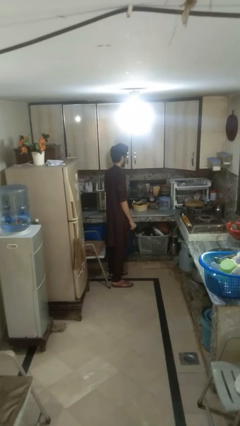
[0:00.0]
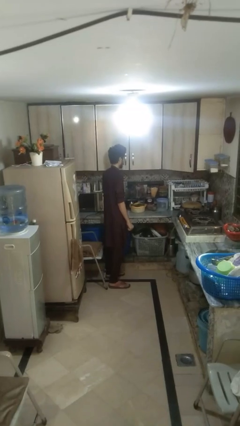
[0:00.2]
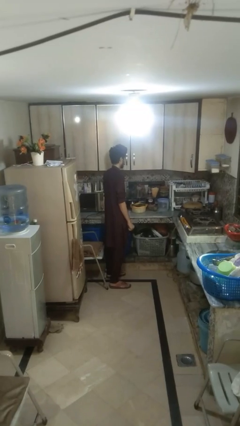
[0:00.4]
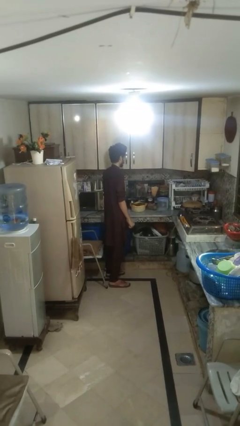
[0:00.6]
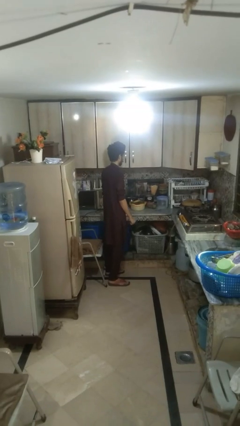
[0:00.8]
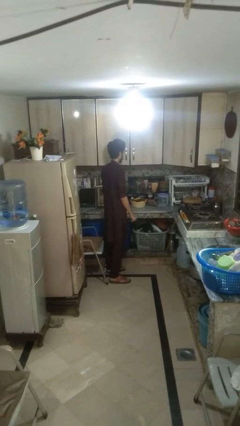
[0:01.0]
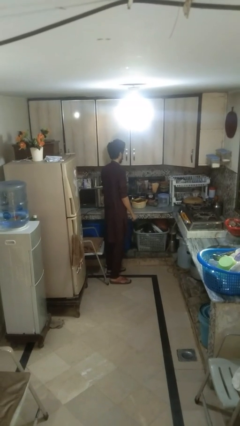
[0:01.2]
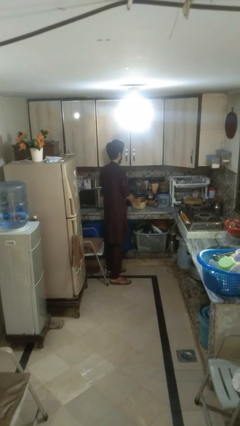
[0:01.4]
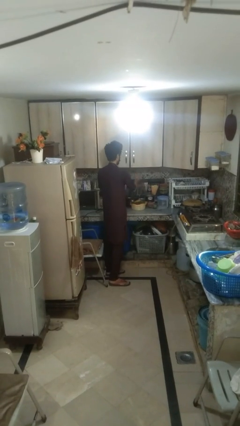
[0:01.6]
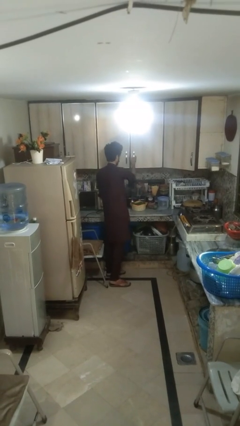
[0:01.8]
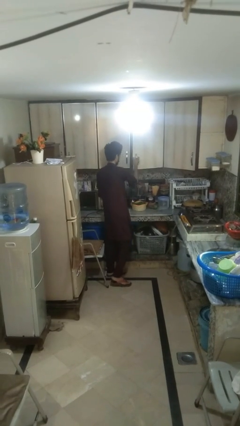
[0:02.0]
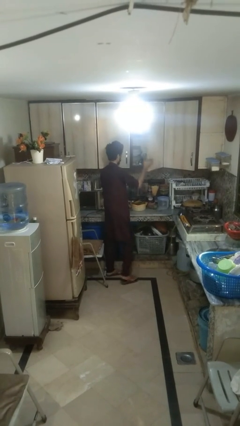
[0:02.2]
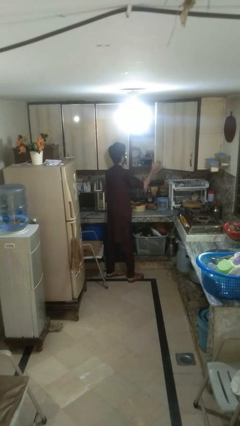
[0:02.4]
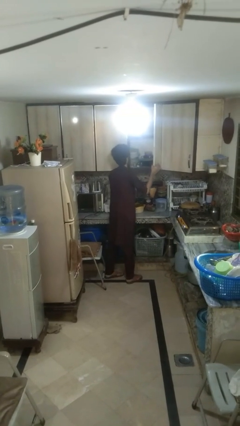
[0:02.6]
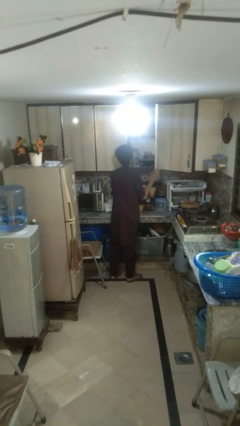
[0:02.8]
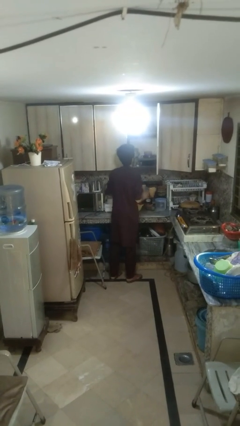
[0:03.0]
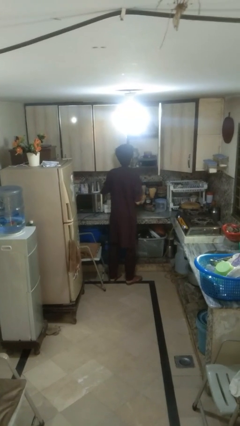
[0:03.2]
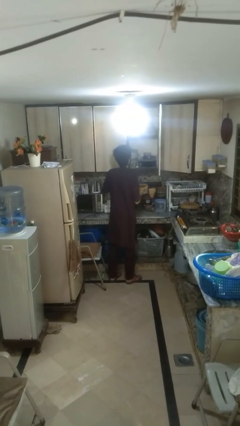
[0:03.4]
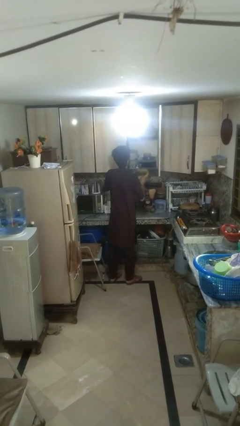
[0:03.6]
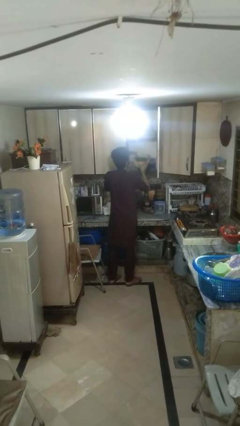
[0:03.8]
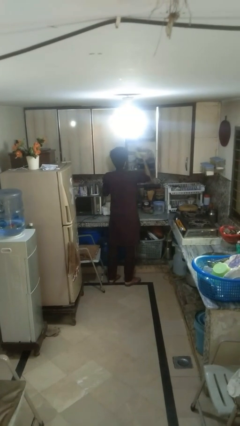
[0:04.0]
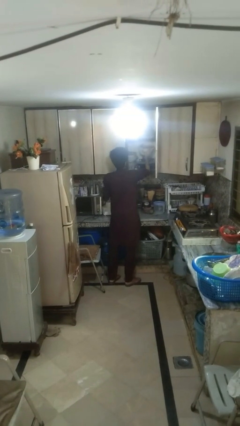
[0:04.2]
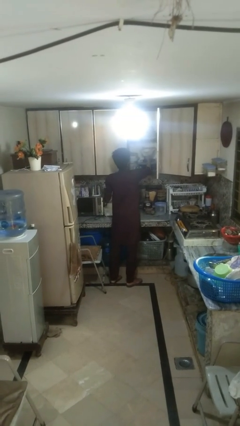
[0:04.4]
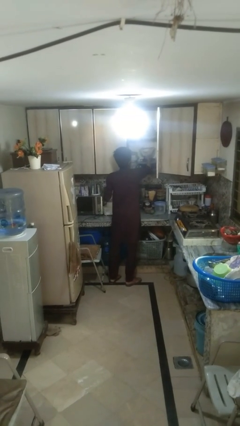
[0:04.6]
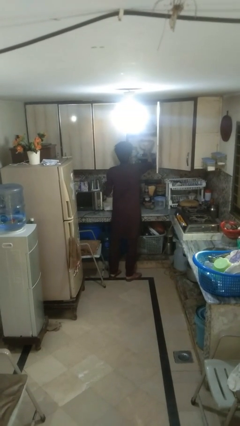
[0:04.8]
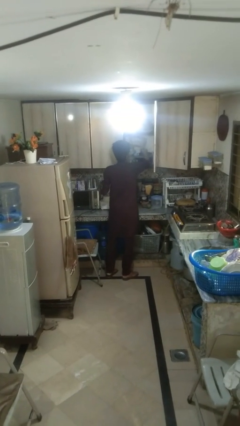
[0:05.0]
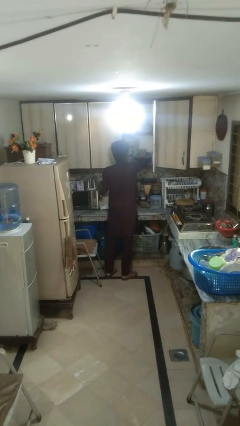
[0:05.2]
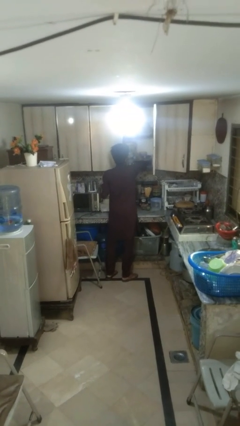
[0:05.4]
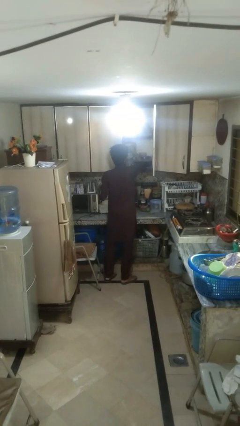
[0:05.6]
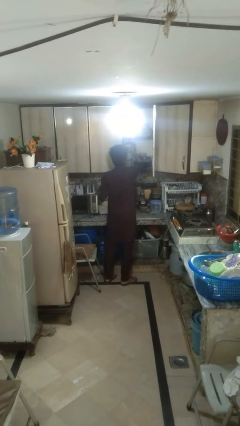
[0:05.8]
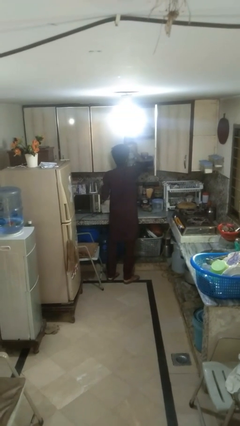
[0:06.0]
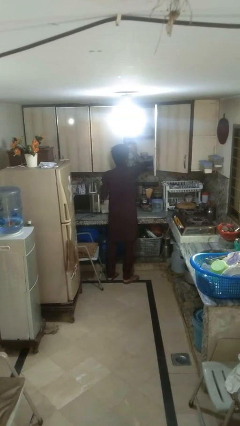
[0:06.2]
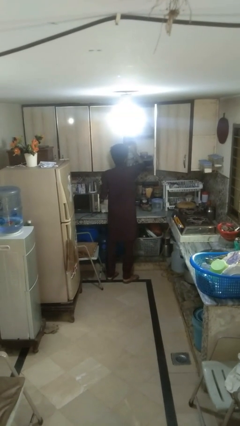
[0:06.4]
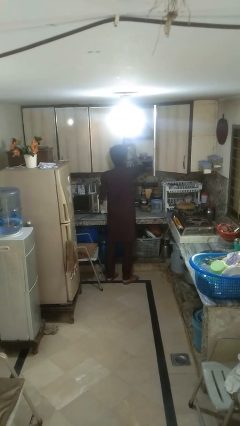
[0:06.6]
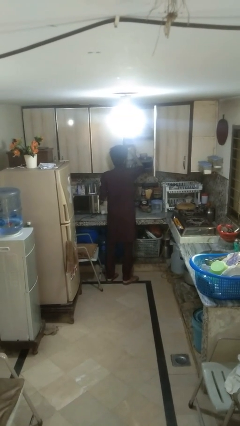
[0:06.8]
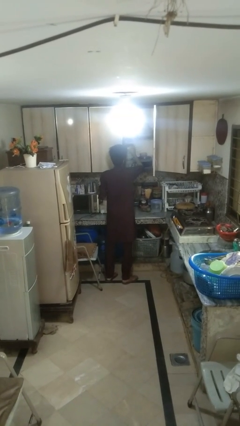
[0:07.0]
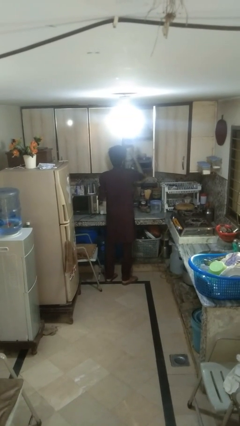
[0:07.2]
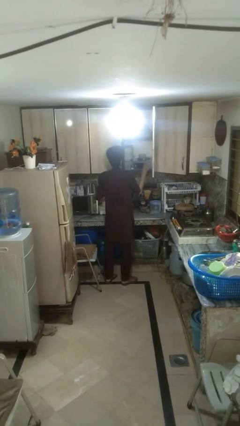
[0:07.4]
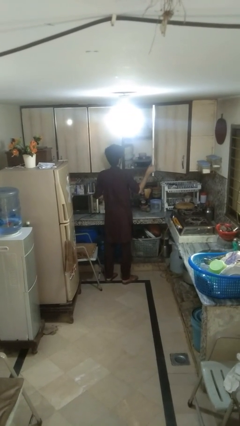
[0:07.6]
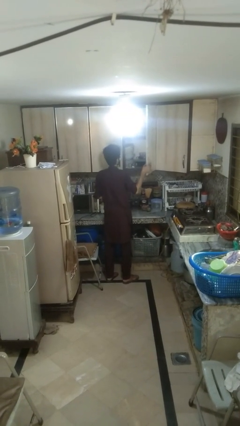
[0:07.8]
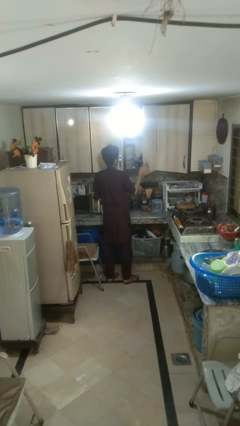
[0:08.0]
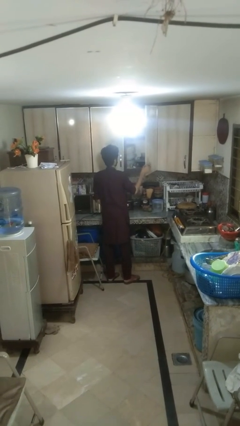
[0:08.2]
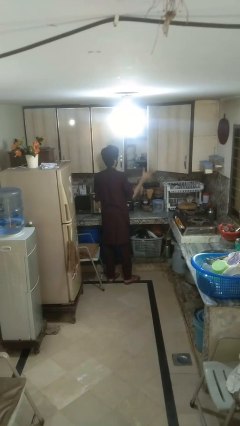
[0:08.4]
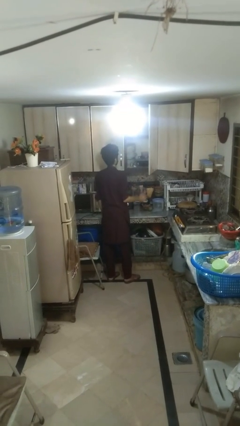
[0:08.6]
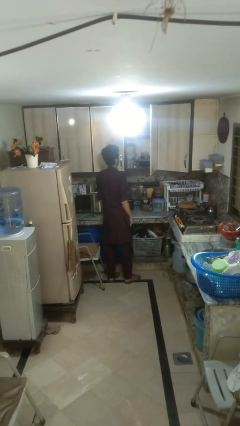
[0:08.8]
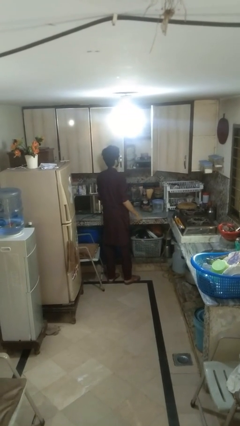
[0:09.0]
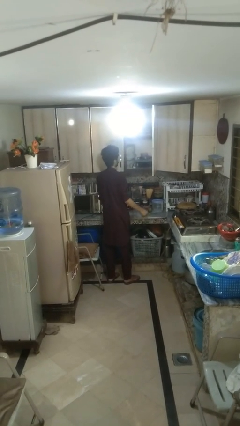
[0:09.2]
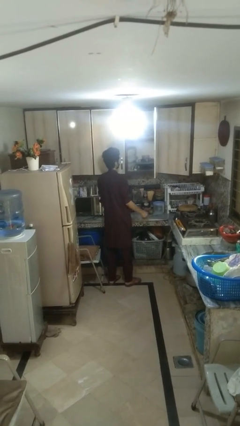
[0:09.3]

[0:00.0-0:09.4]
person puts object in cabinet

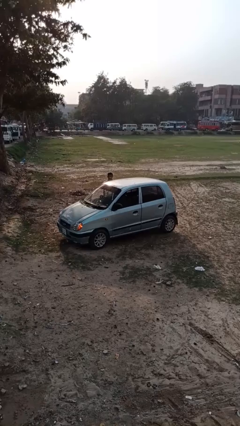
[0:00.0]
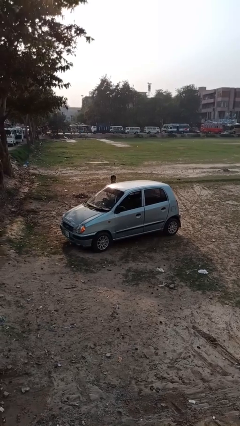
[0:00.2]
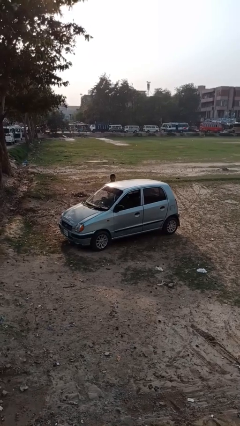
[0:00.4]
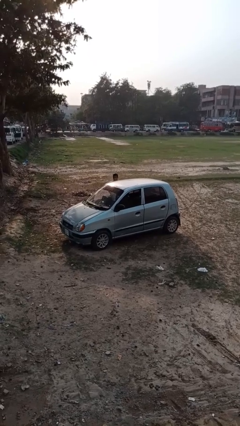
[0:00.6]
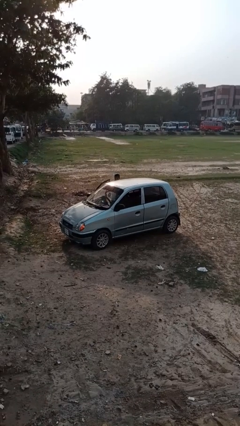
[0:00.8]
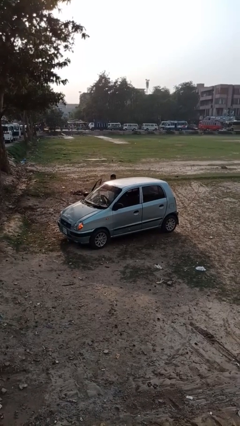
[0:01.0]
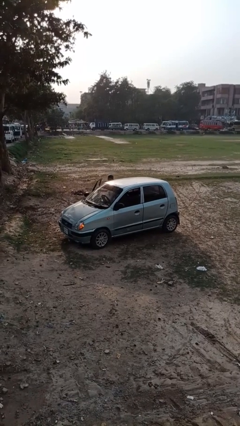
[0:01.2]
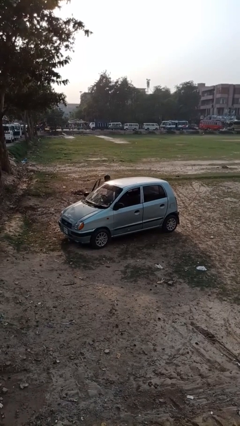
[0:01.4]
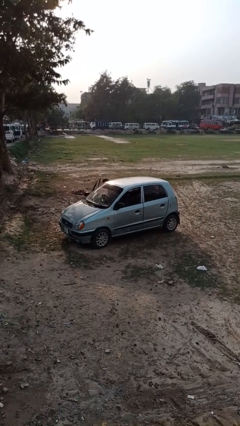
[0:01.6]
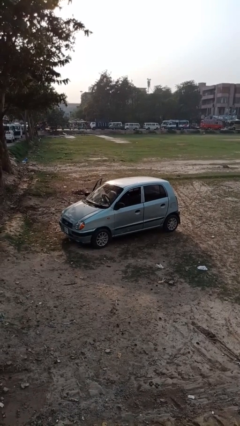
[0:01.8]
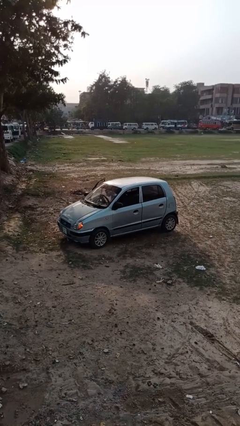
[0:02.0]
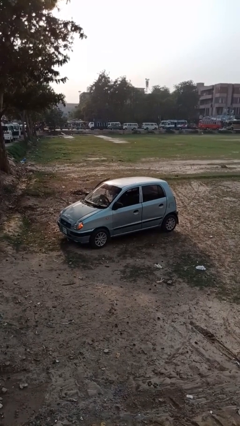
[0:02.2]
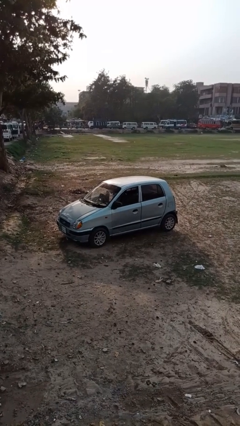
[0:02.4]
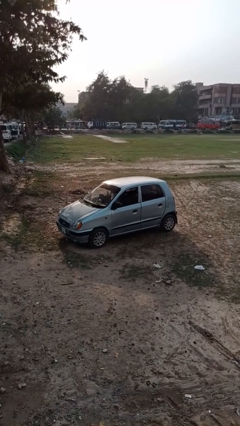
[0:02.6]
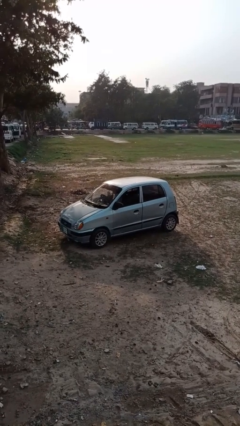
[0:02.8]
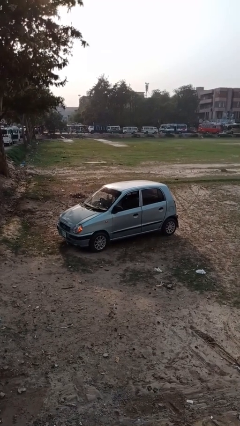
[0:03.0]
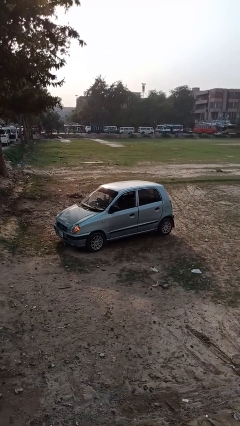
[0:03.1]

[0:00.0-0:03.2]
car picks up person

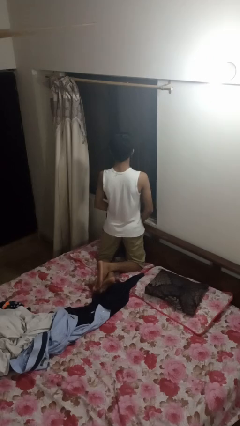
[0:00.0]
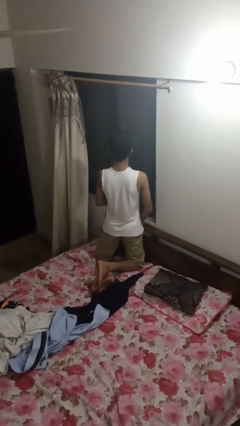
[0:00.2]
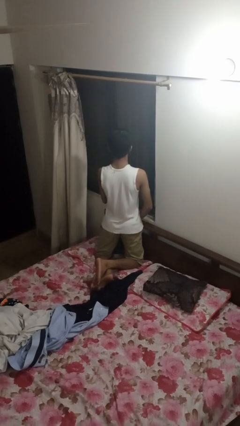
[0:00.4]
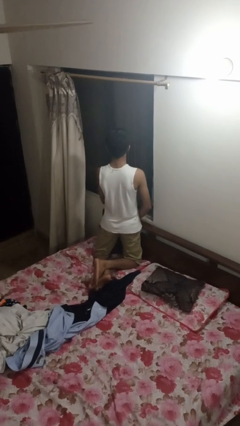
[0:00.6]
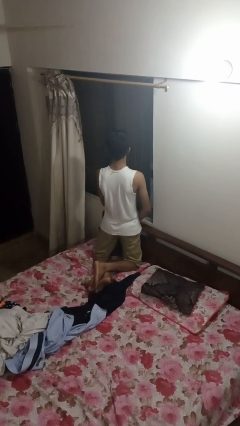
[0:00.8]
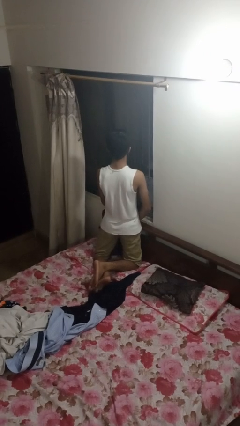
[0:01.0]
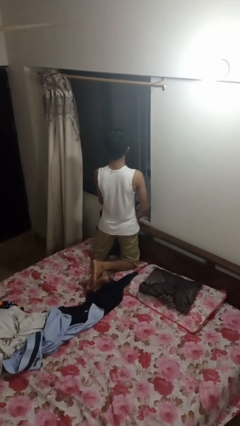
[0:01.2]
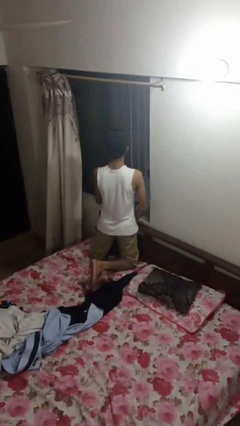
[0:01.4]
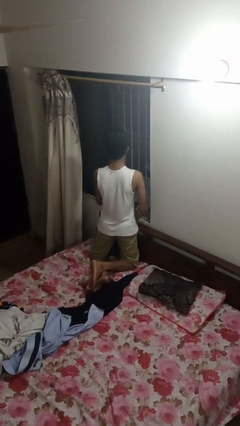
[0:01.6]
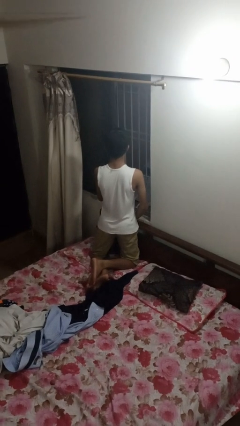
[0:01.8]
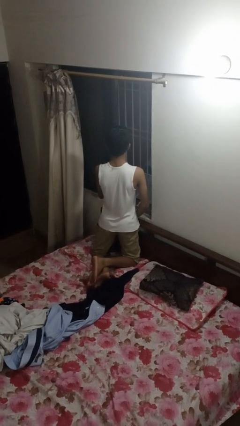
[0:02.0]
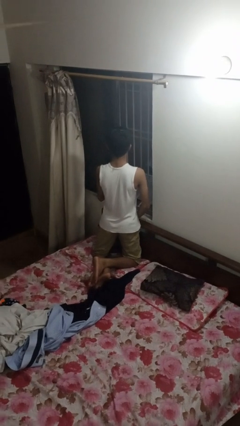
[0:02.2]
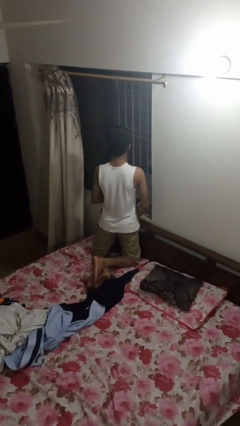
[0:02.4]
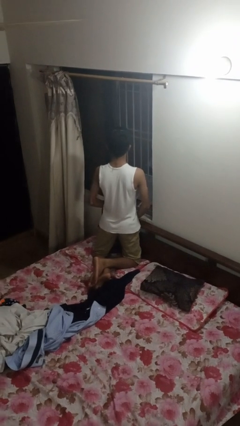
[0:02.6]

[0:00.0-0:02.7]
person opens home window

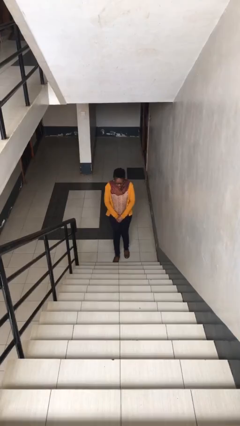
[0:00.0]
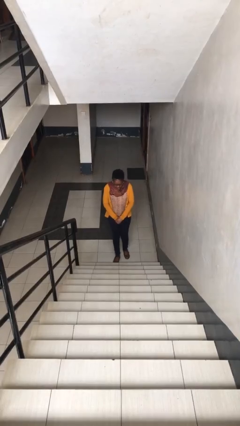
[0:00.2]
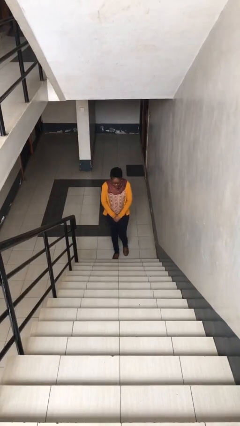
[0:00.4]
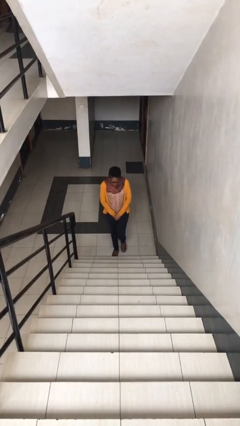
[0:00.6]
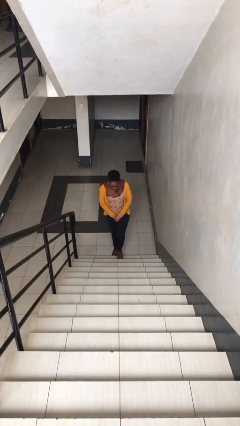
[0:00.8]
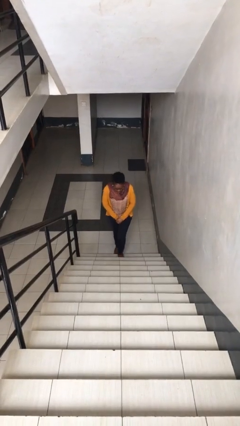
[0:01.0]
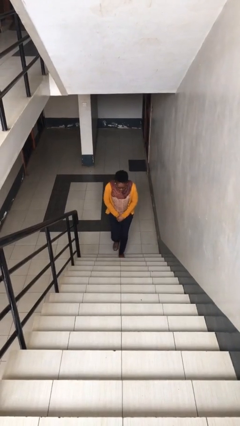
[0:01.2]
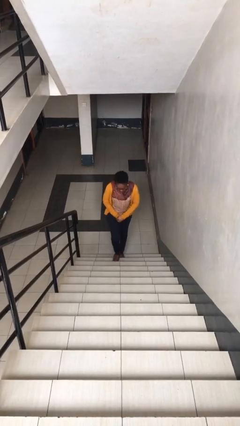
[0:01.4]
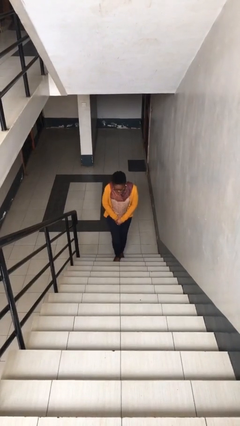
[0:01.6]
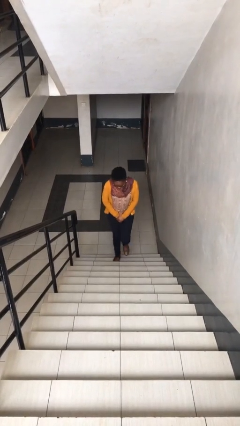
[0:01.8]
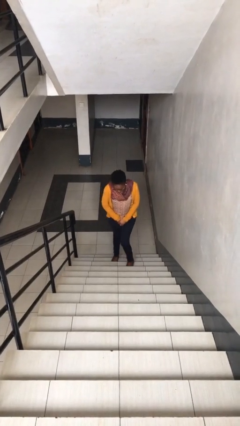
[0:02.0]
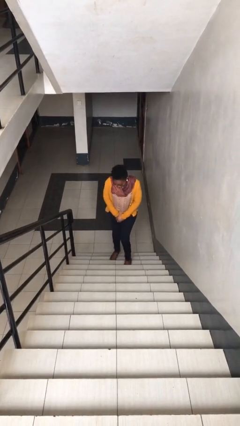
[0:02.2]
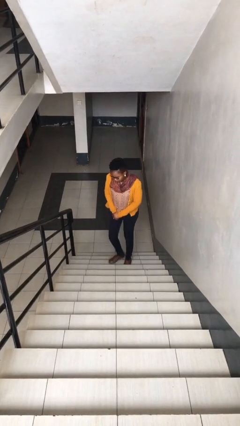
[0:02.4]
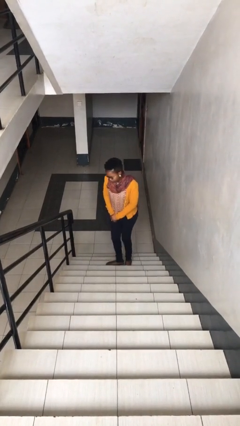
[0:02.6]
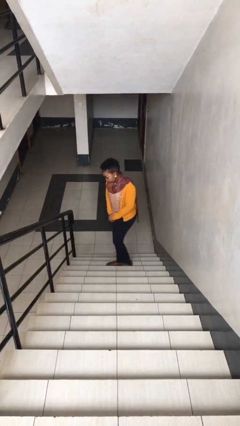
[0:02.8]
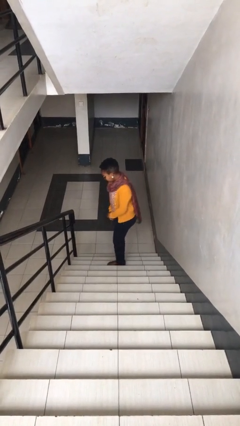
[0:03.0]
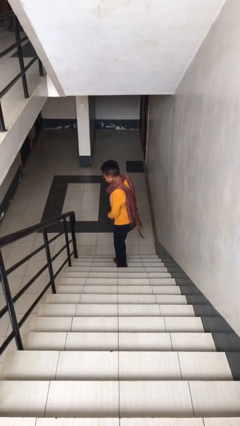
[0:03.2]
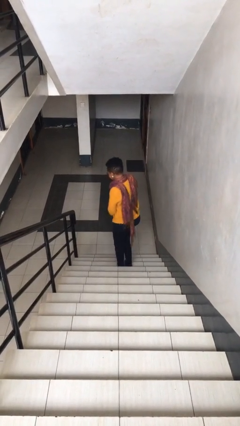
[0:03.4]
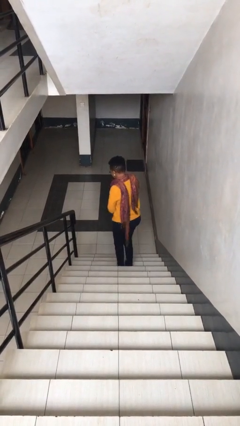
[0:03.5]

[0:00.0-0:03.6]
person climbs up stairs
